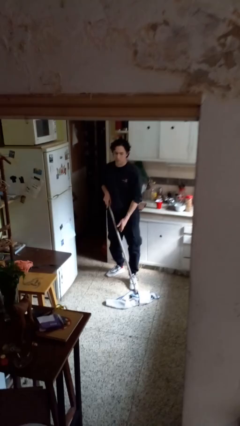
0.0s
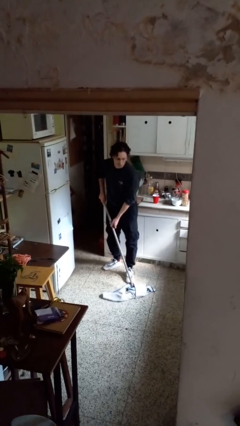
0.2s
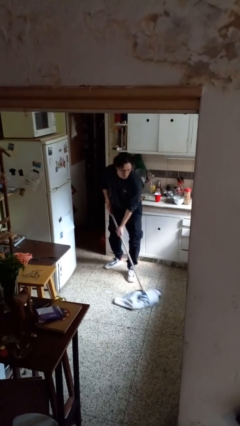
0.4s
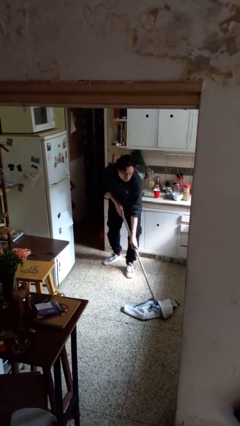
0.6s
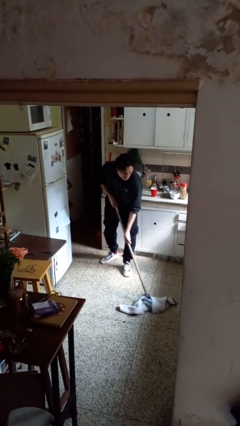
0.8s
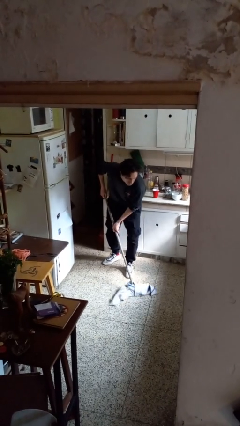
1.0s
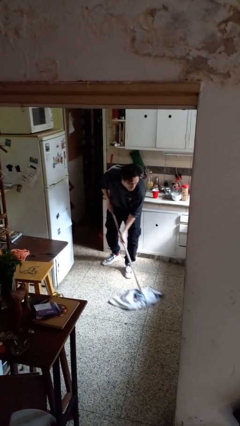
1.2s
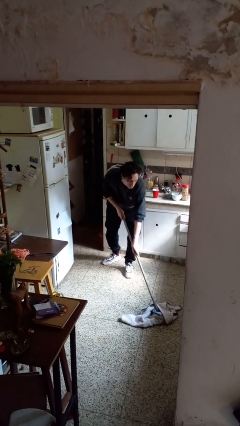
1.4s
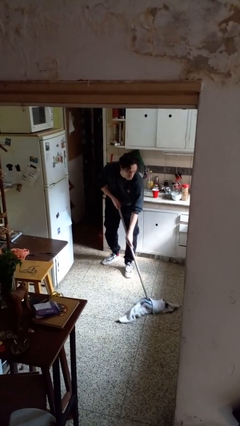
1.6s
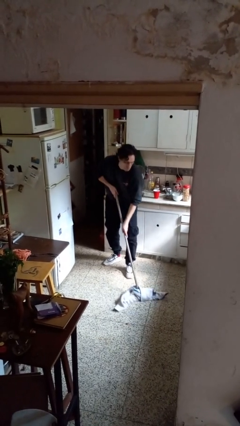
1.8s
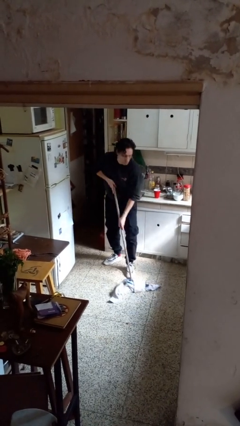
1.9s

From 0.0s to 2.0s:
person mops

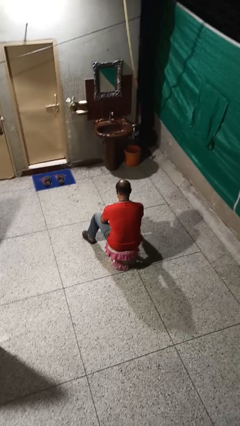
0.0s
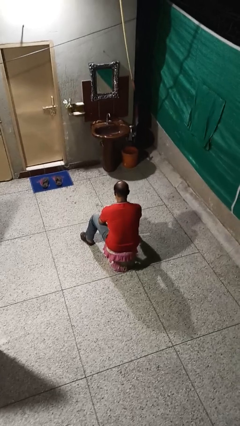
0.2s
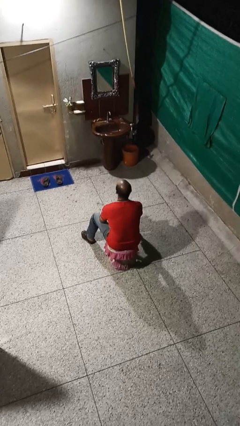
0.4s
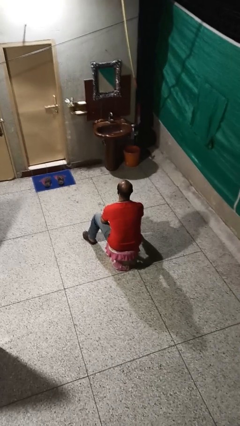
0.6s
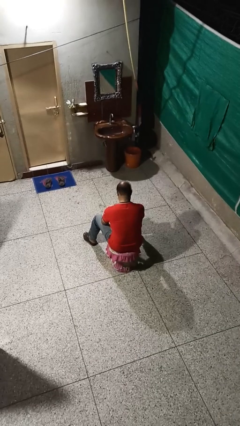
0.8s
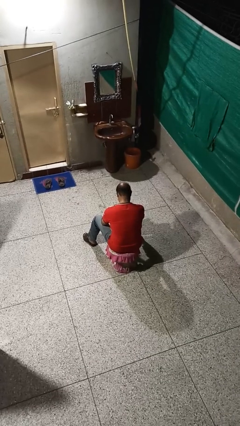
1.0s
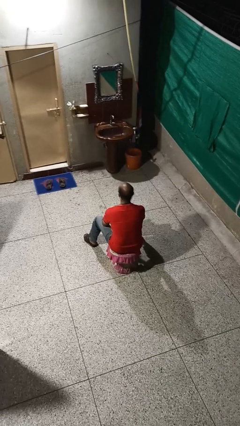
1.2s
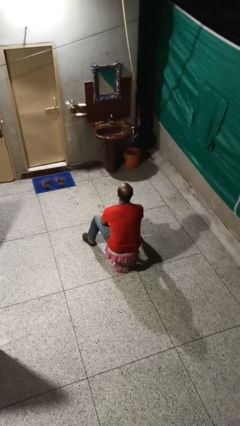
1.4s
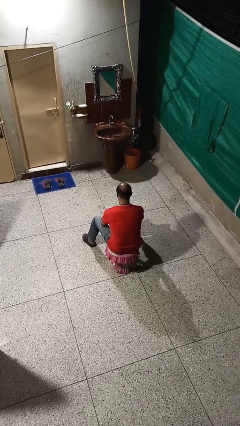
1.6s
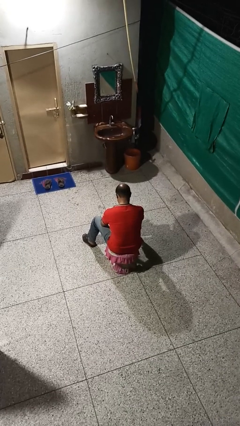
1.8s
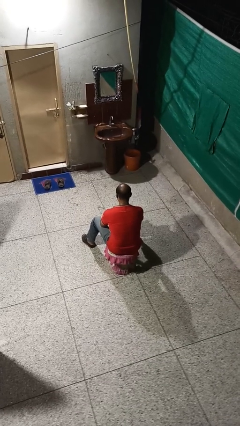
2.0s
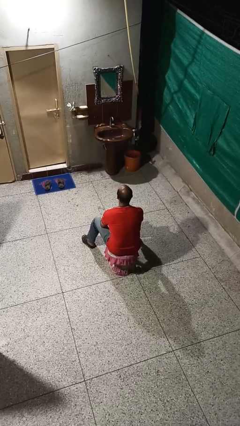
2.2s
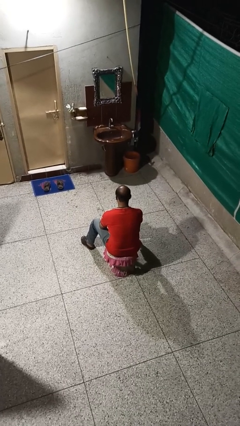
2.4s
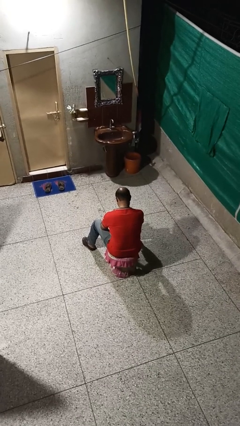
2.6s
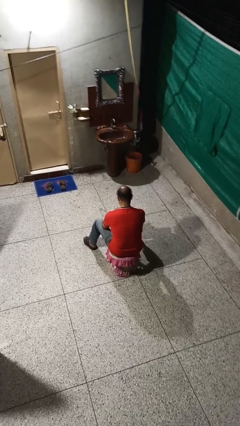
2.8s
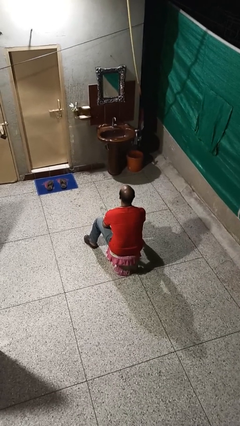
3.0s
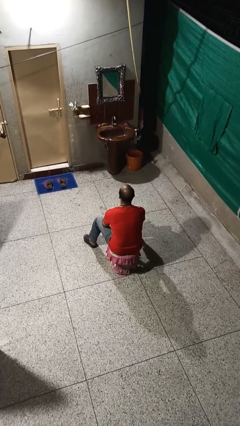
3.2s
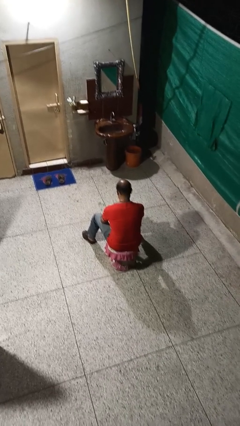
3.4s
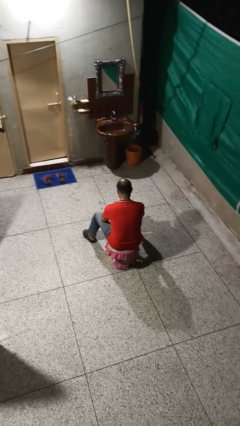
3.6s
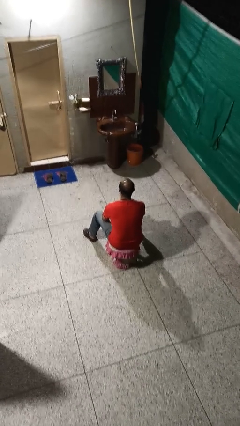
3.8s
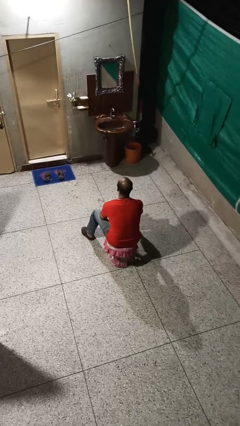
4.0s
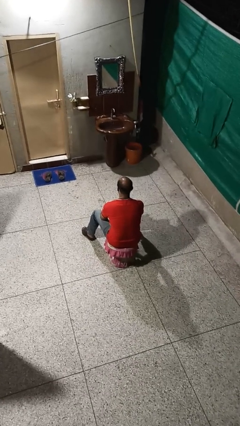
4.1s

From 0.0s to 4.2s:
person nods head

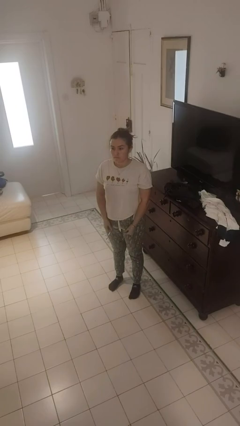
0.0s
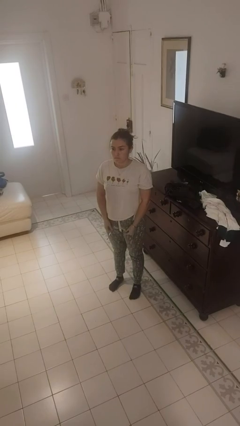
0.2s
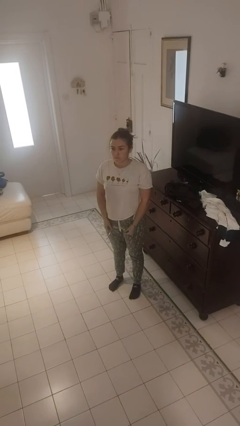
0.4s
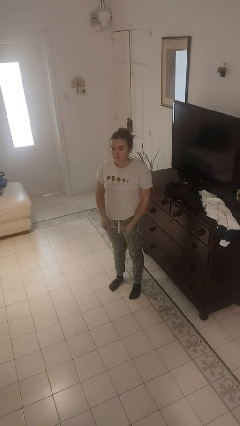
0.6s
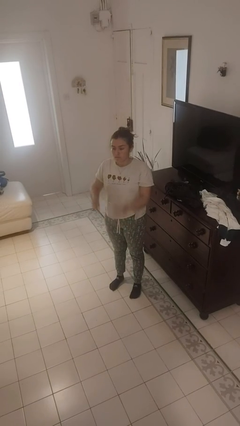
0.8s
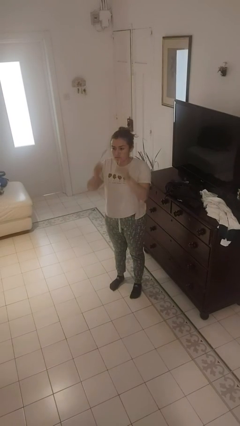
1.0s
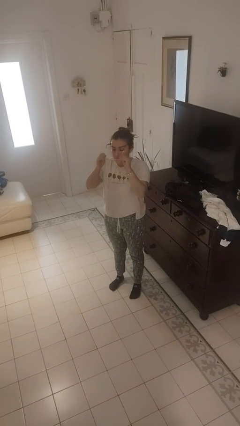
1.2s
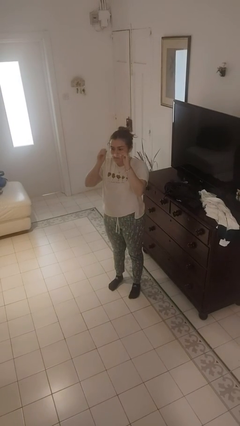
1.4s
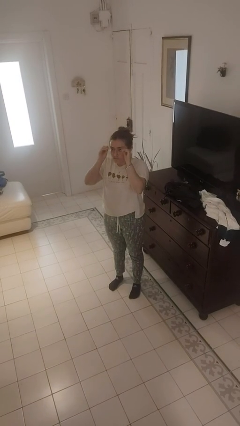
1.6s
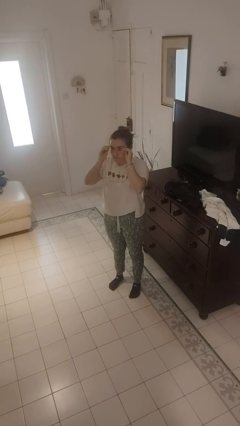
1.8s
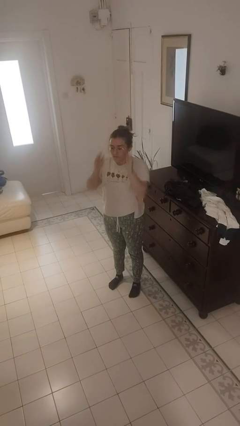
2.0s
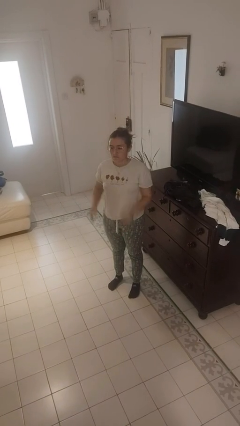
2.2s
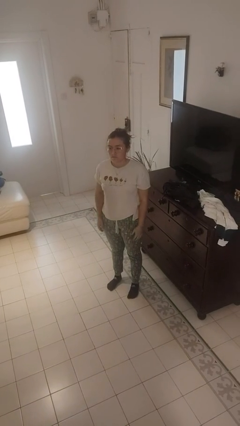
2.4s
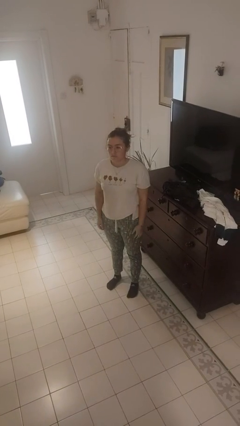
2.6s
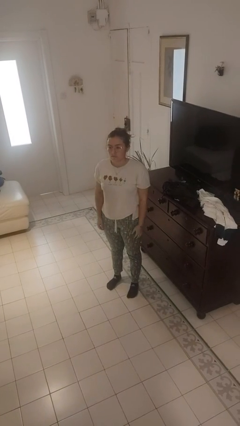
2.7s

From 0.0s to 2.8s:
person puts on glasses

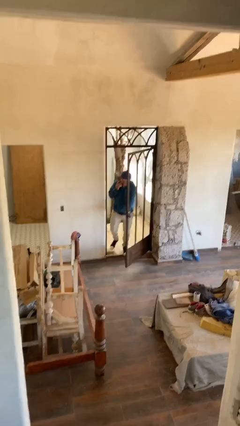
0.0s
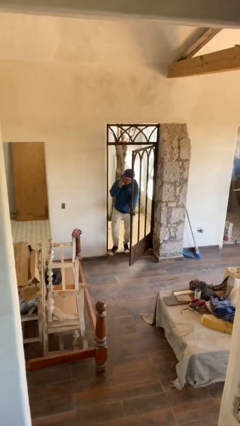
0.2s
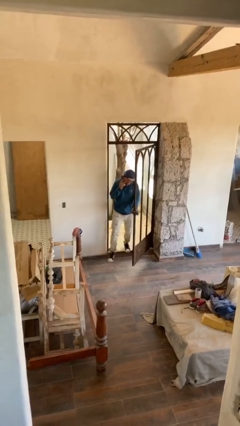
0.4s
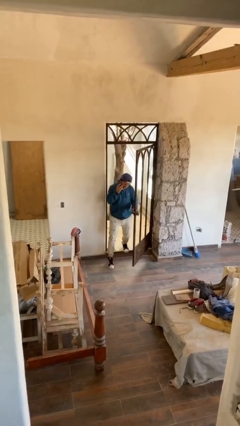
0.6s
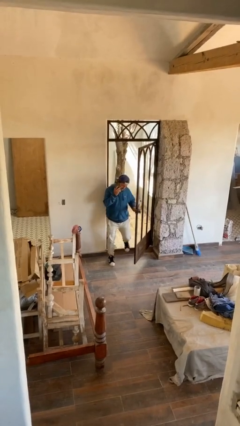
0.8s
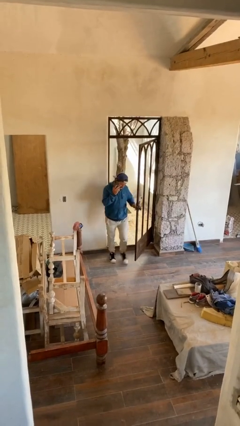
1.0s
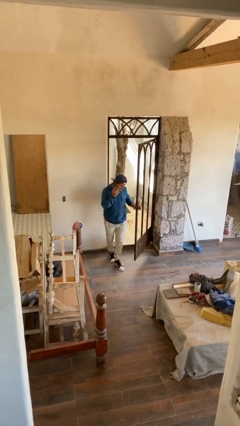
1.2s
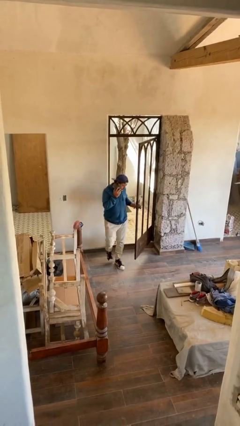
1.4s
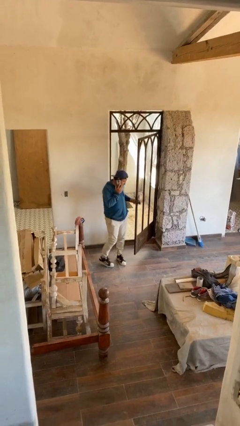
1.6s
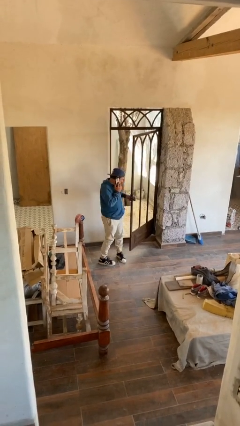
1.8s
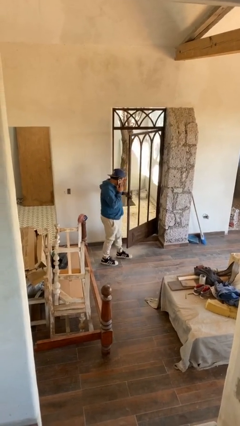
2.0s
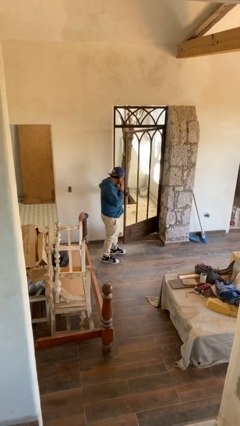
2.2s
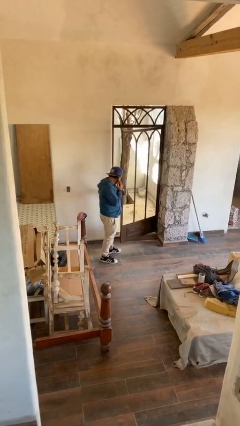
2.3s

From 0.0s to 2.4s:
person enters scene through structure

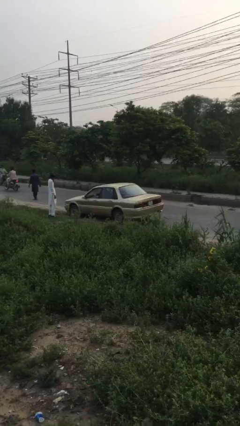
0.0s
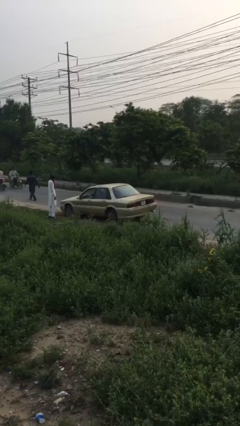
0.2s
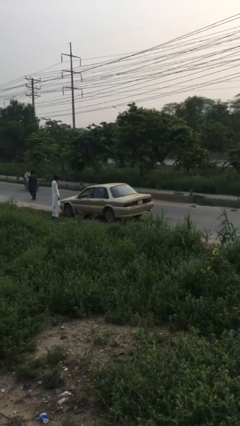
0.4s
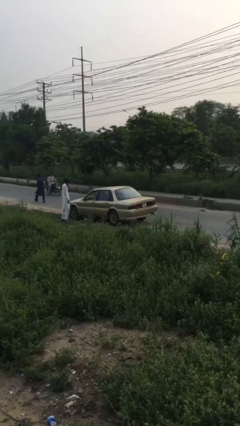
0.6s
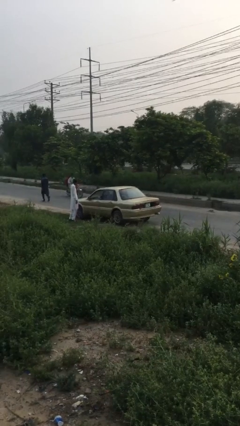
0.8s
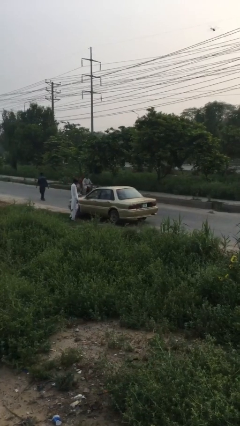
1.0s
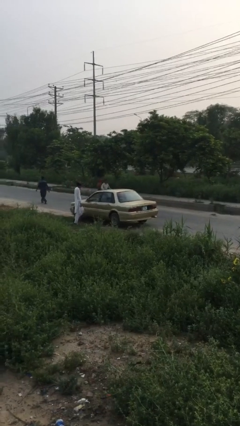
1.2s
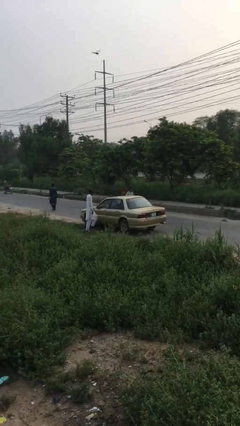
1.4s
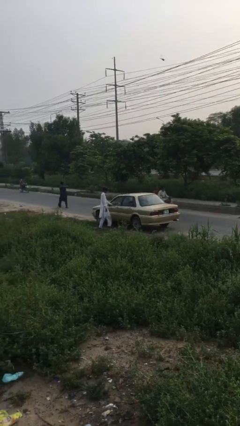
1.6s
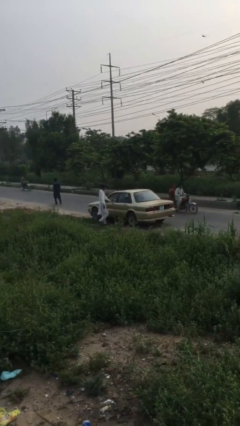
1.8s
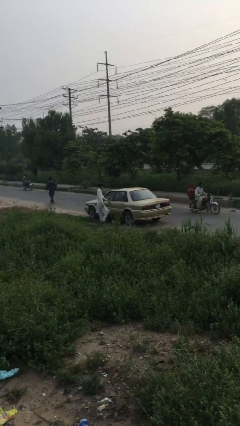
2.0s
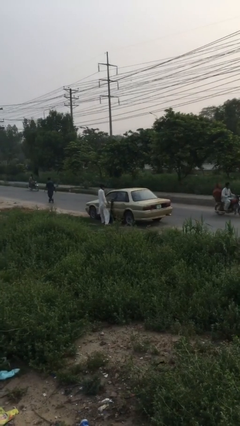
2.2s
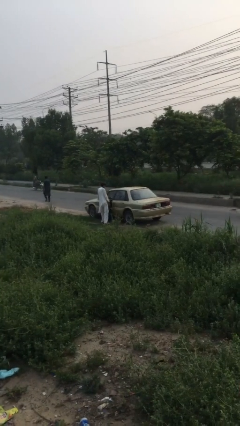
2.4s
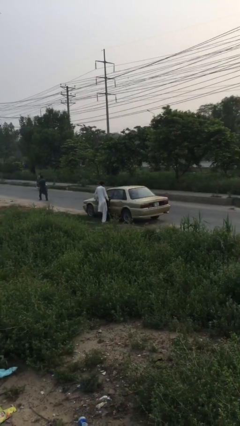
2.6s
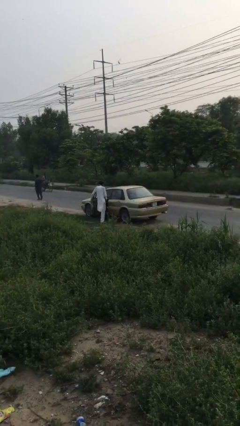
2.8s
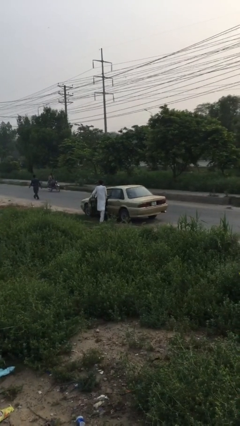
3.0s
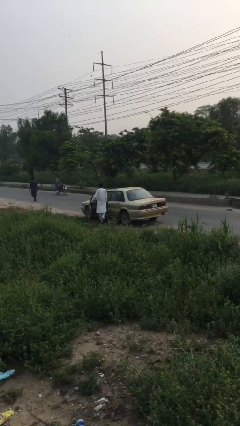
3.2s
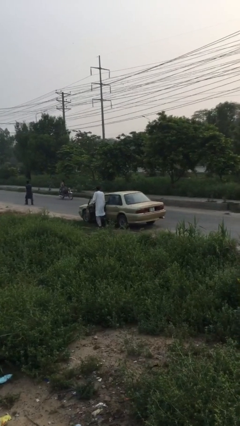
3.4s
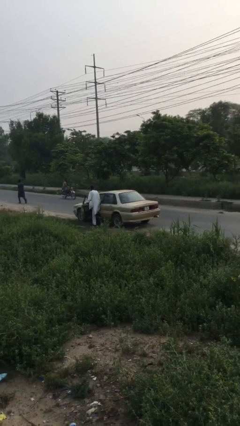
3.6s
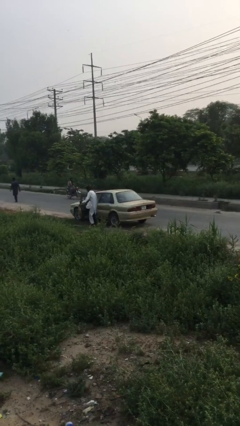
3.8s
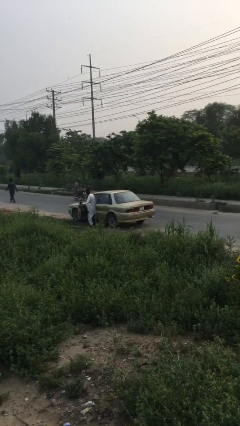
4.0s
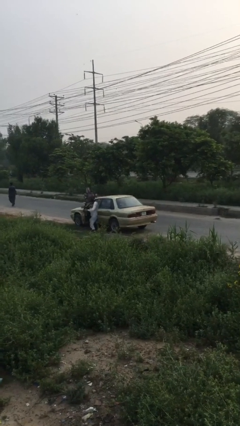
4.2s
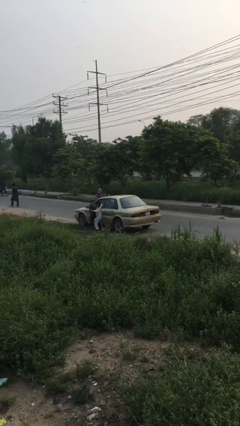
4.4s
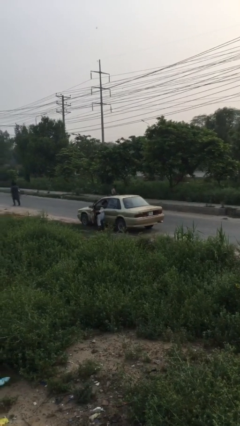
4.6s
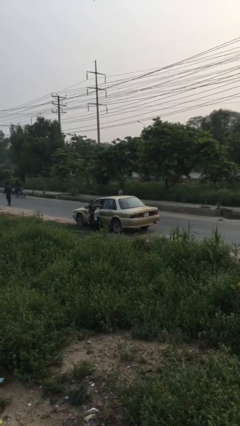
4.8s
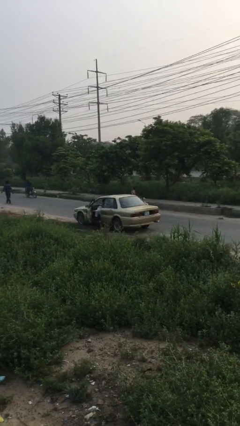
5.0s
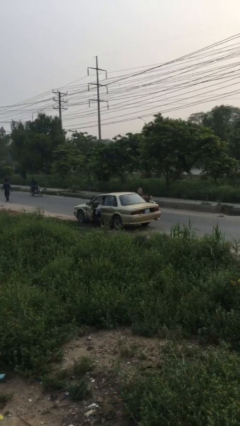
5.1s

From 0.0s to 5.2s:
car picks up person

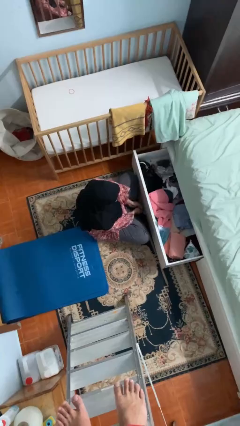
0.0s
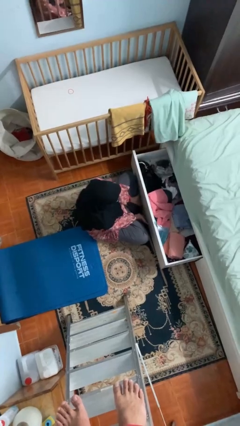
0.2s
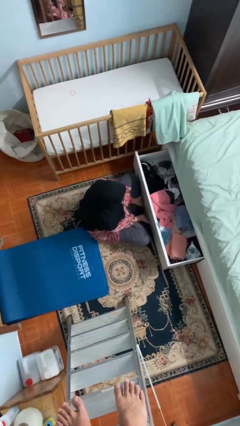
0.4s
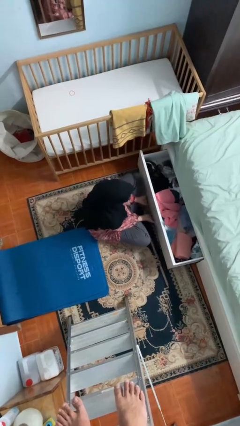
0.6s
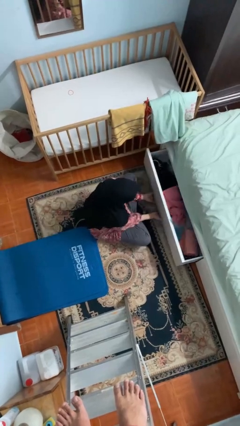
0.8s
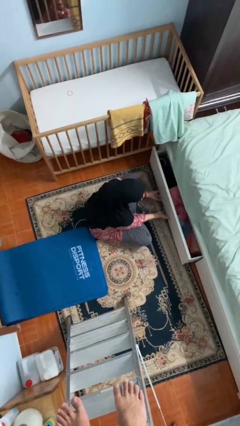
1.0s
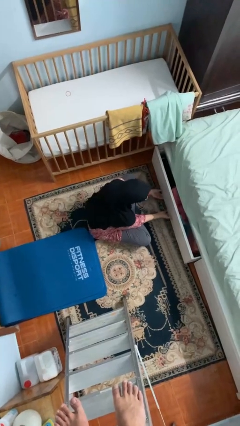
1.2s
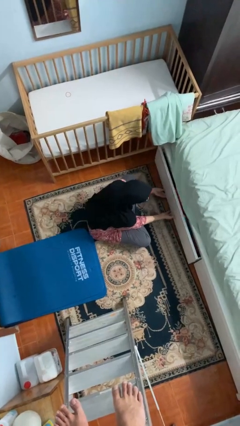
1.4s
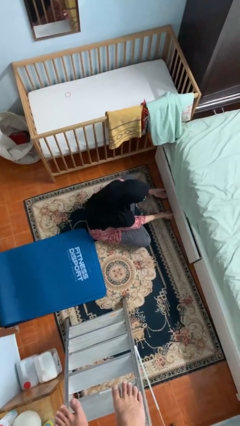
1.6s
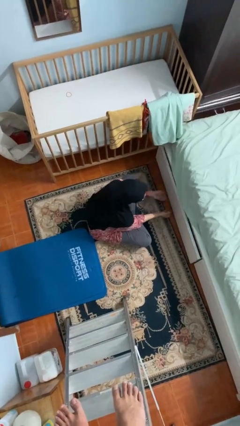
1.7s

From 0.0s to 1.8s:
person closes dresser drawer
